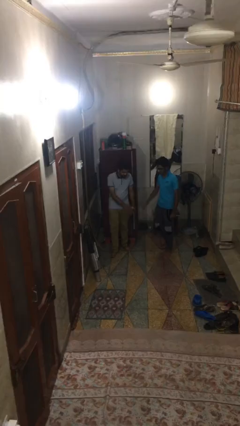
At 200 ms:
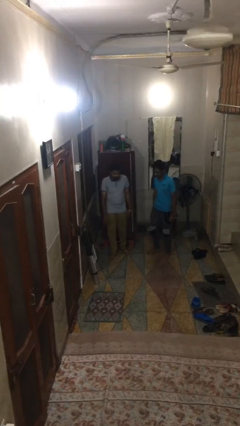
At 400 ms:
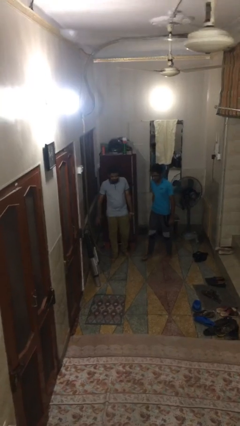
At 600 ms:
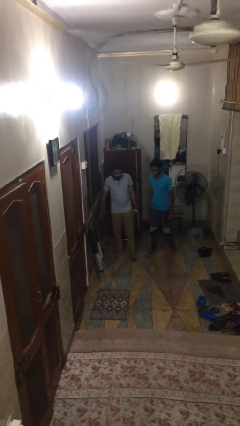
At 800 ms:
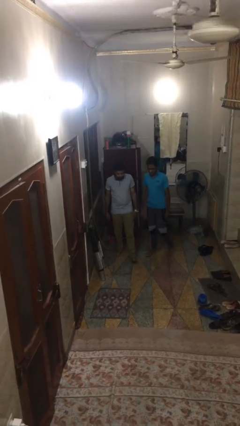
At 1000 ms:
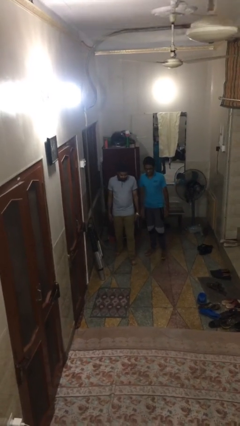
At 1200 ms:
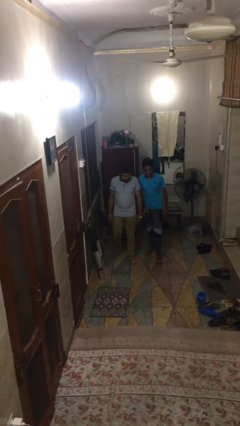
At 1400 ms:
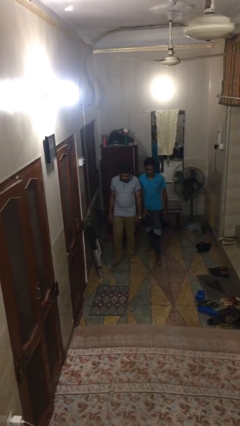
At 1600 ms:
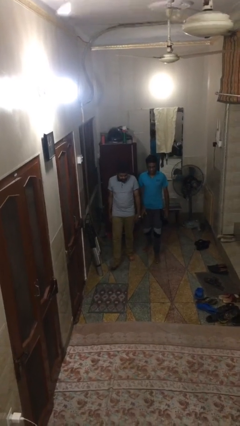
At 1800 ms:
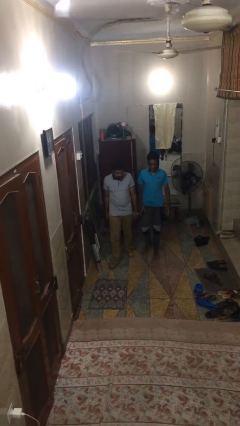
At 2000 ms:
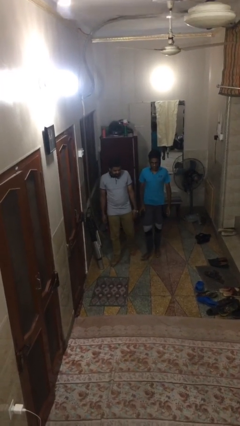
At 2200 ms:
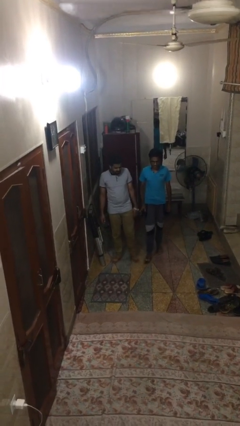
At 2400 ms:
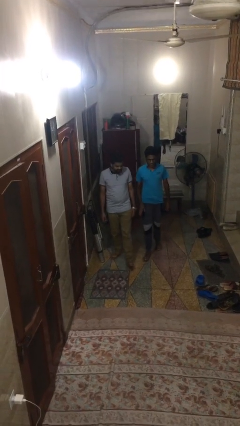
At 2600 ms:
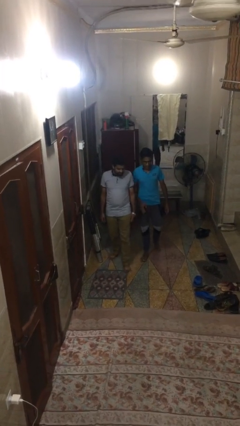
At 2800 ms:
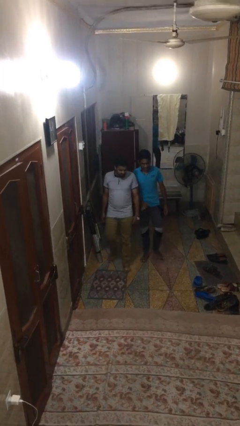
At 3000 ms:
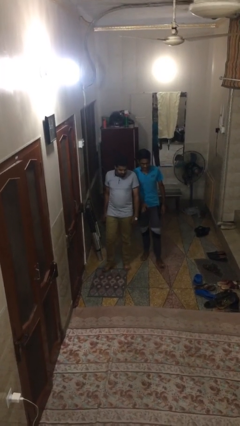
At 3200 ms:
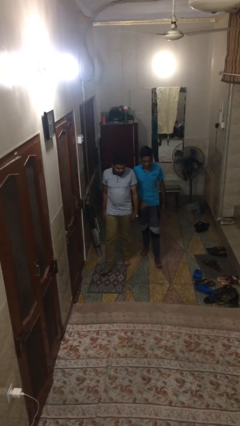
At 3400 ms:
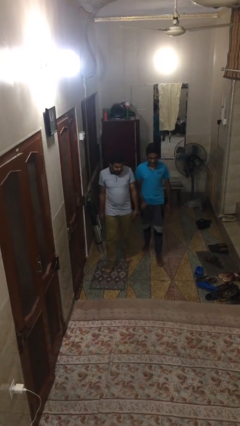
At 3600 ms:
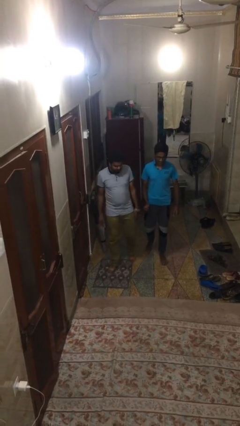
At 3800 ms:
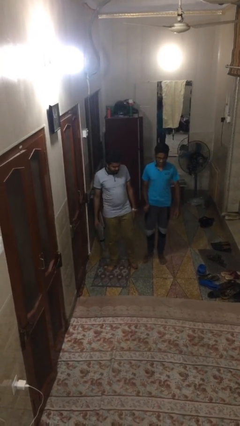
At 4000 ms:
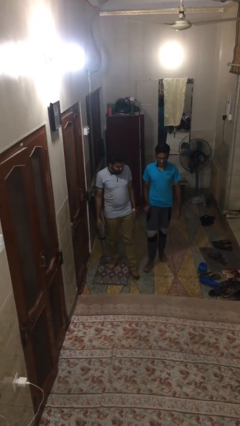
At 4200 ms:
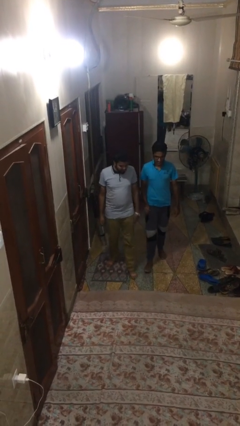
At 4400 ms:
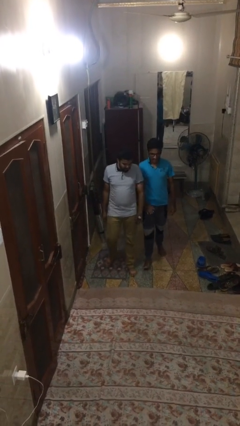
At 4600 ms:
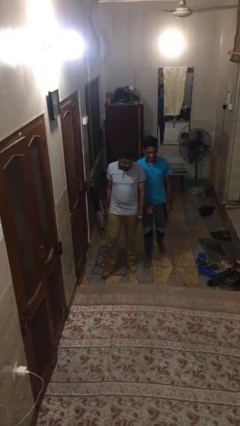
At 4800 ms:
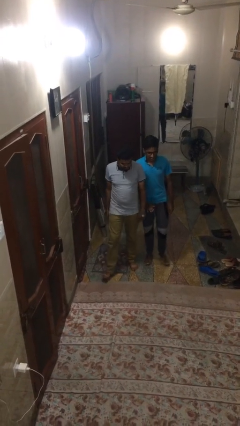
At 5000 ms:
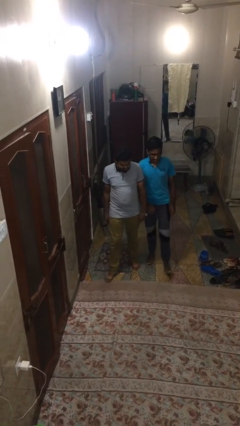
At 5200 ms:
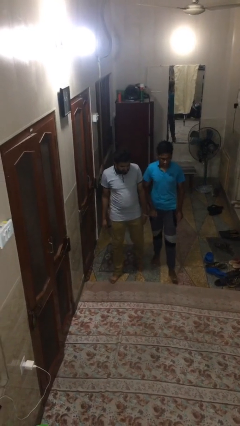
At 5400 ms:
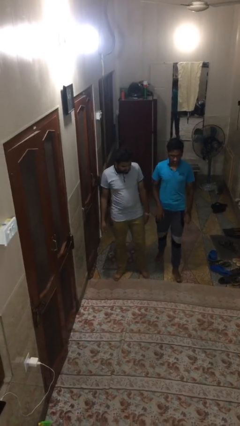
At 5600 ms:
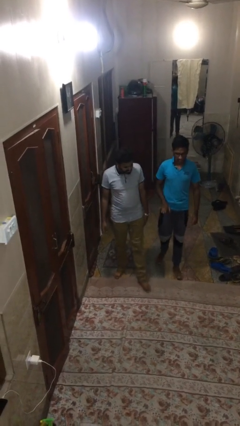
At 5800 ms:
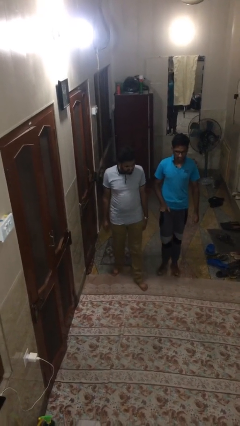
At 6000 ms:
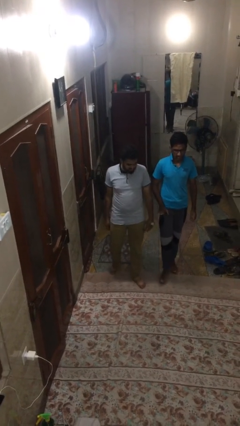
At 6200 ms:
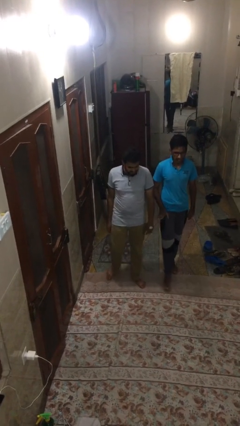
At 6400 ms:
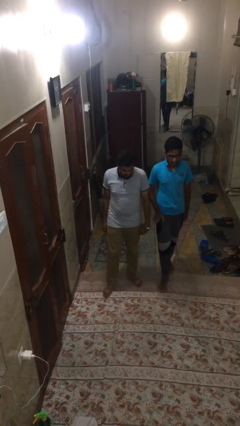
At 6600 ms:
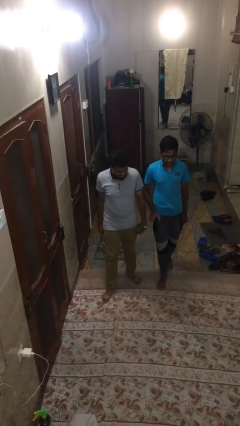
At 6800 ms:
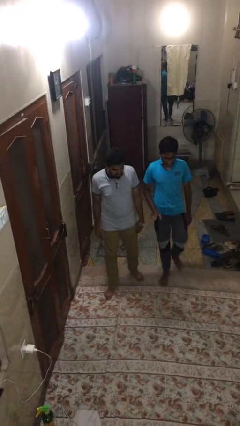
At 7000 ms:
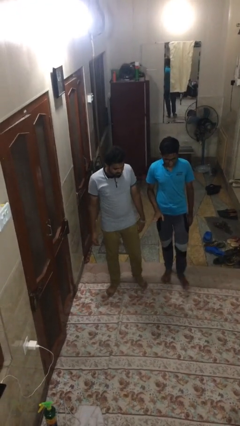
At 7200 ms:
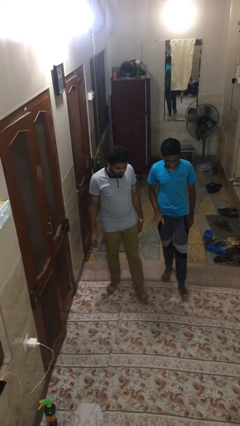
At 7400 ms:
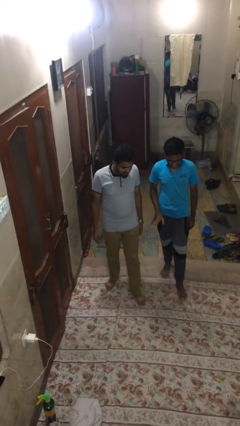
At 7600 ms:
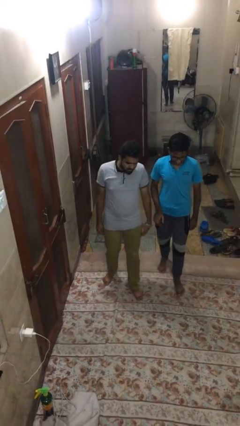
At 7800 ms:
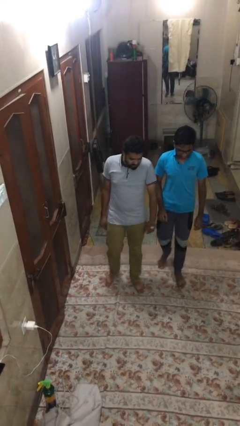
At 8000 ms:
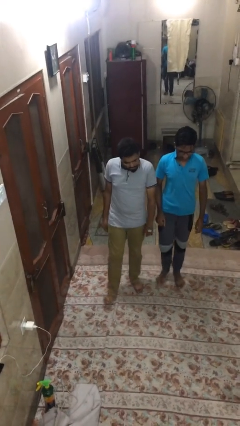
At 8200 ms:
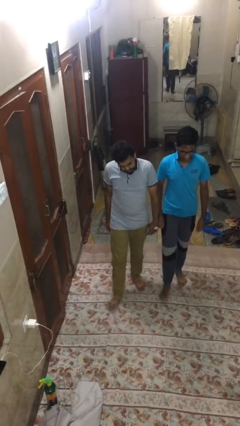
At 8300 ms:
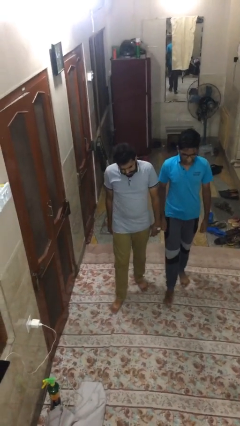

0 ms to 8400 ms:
person talks to person

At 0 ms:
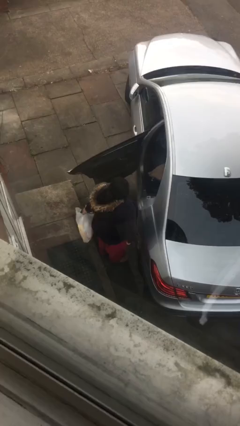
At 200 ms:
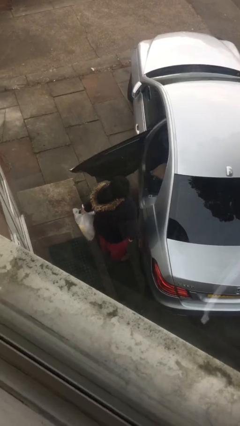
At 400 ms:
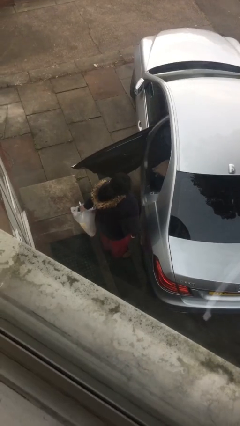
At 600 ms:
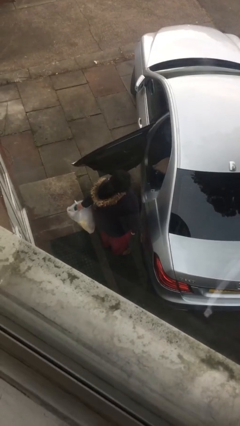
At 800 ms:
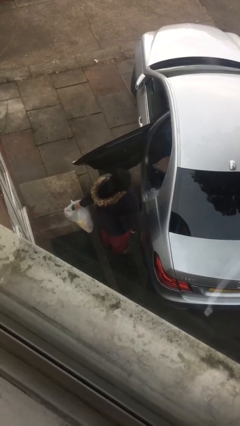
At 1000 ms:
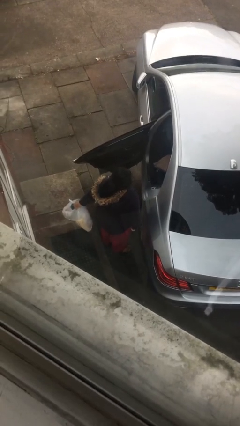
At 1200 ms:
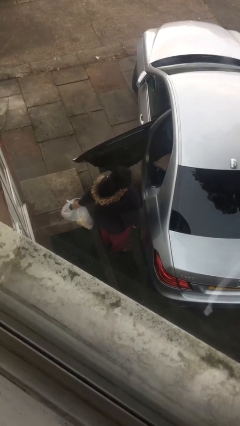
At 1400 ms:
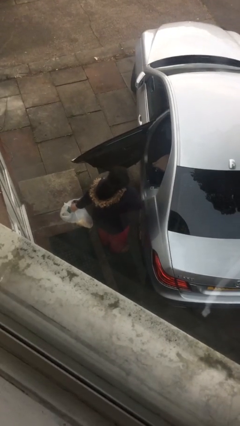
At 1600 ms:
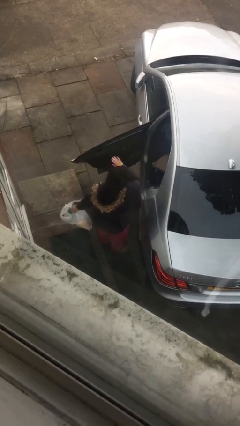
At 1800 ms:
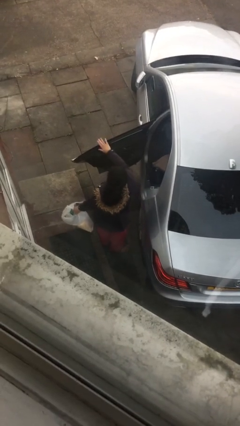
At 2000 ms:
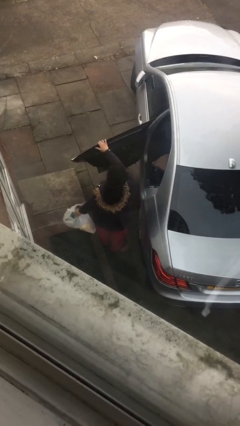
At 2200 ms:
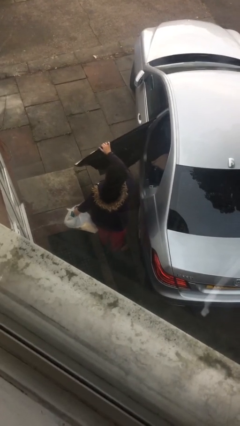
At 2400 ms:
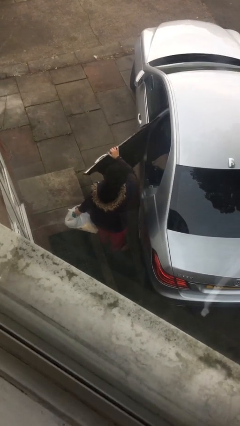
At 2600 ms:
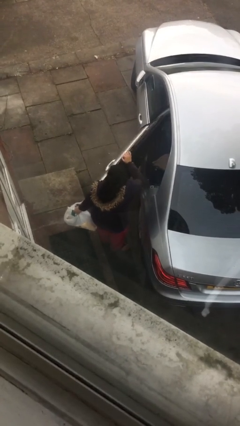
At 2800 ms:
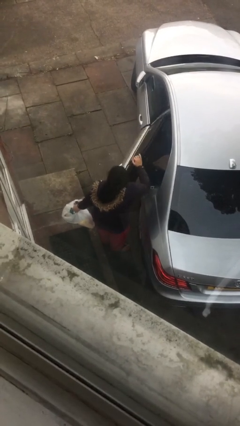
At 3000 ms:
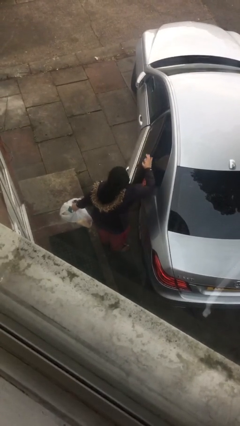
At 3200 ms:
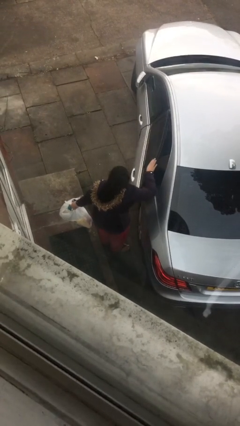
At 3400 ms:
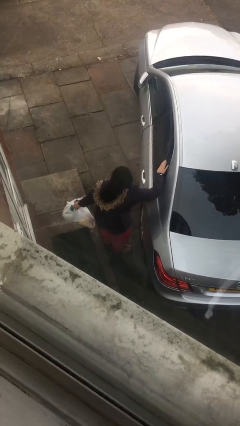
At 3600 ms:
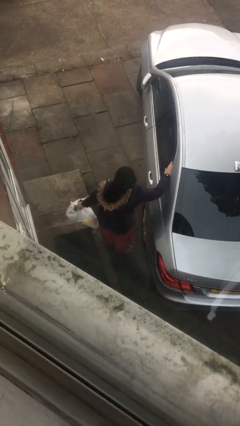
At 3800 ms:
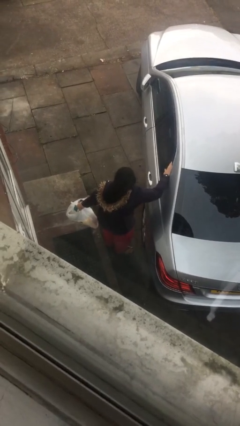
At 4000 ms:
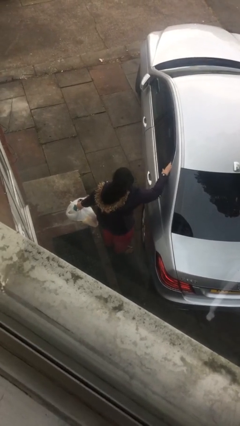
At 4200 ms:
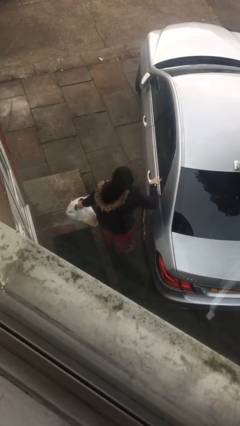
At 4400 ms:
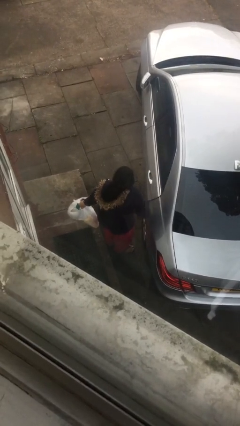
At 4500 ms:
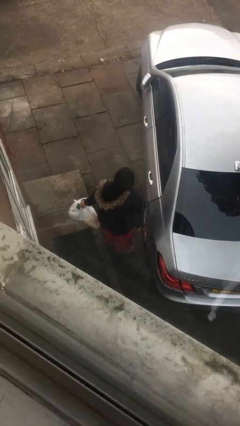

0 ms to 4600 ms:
person closes car door

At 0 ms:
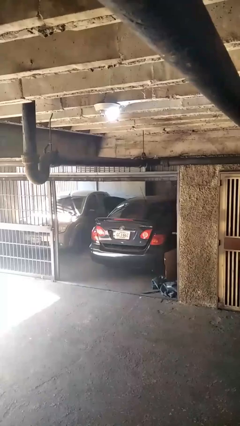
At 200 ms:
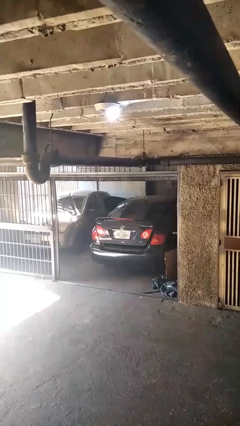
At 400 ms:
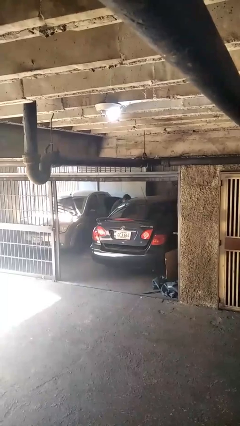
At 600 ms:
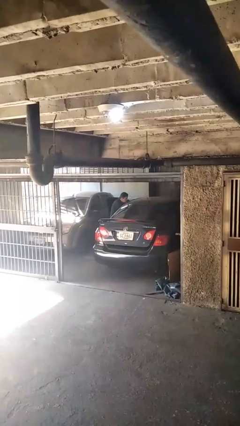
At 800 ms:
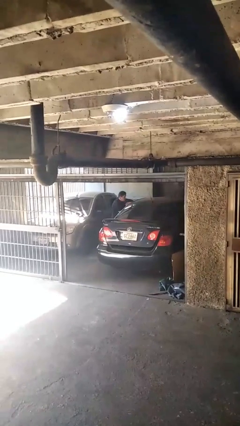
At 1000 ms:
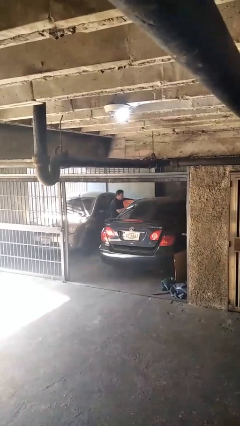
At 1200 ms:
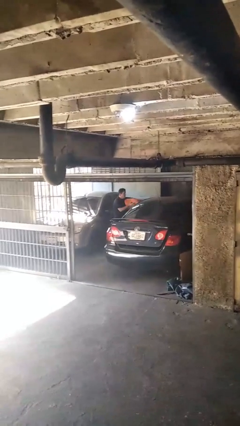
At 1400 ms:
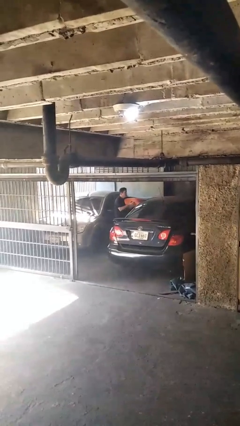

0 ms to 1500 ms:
person unloads car

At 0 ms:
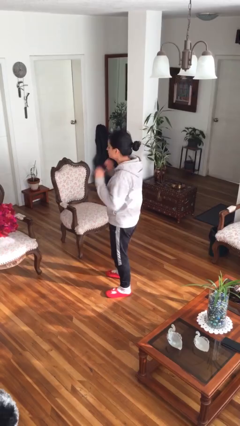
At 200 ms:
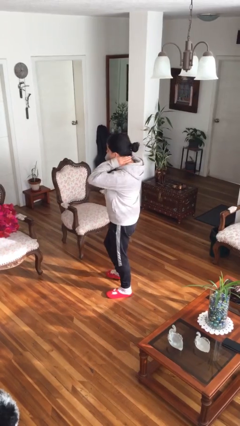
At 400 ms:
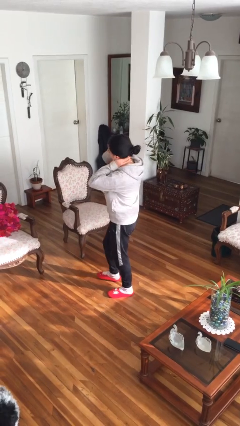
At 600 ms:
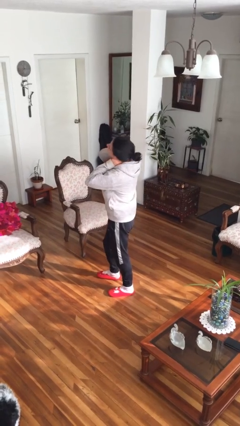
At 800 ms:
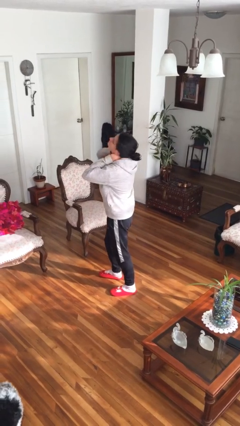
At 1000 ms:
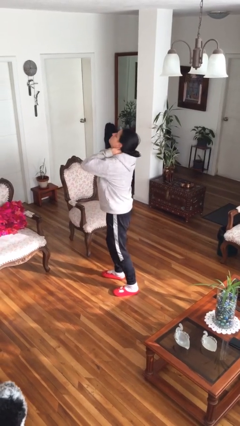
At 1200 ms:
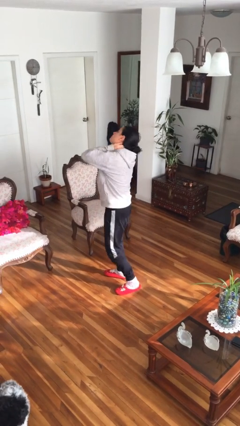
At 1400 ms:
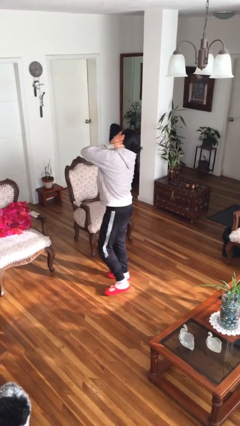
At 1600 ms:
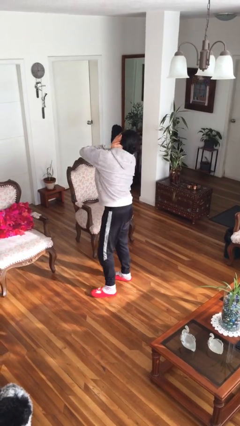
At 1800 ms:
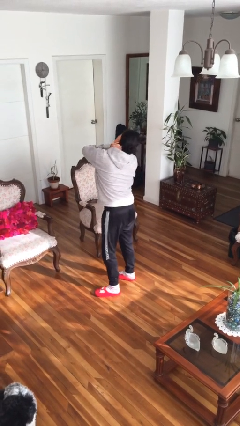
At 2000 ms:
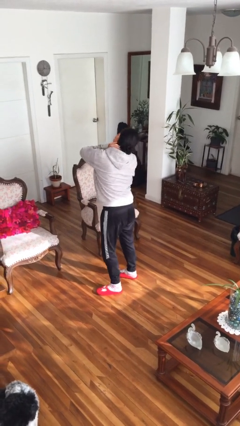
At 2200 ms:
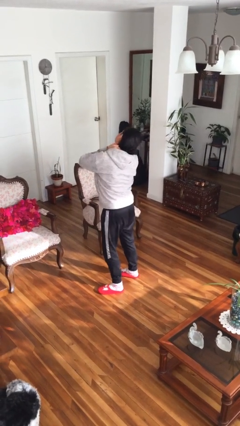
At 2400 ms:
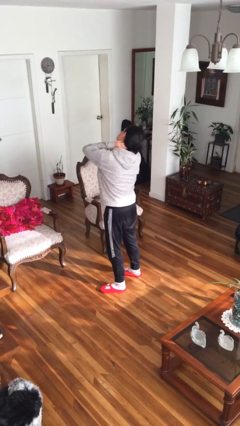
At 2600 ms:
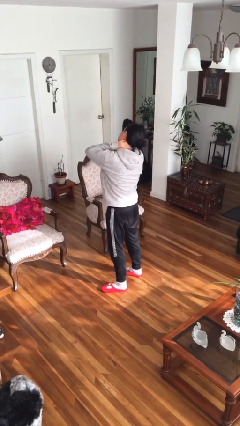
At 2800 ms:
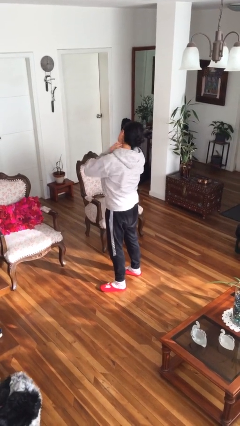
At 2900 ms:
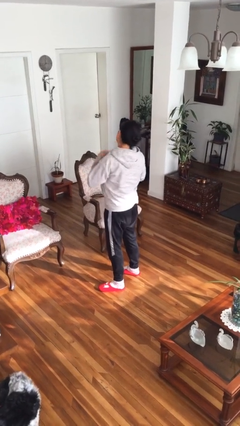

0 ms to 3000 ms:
person rubs neck

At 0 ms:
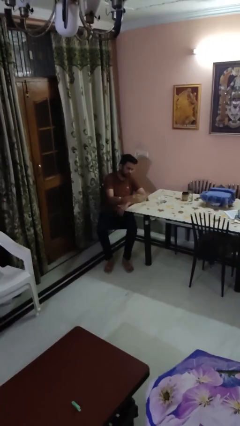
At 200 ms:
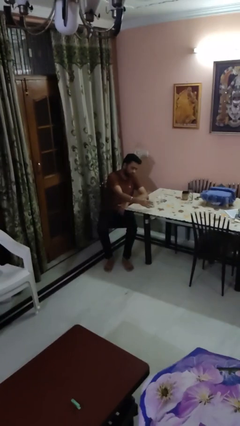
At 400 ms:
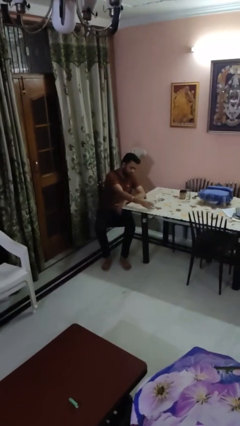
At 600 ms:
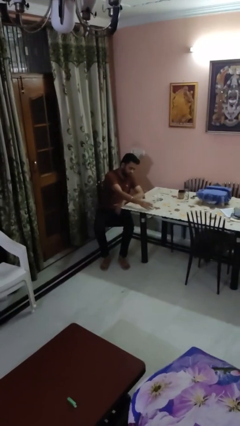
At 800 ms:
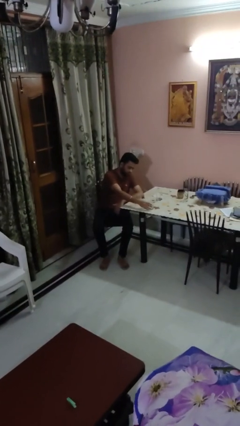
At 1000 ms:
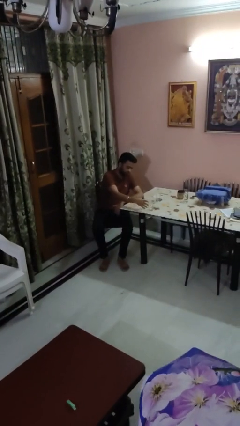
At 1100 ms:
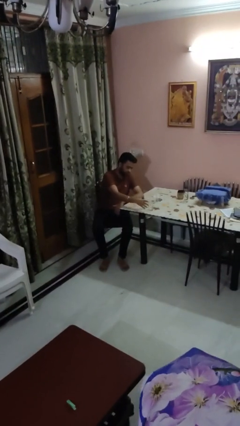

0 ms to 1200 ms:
person puts down object on table
